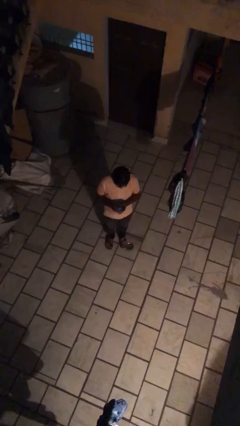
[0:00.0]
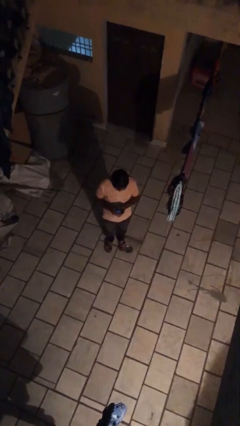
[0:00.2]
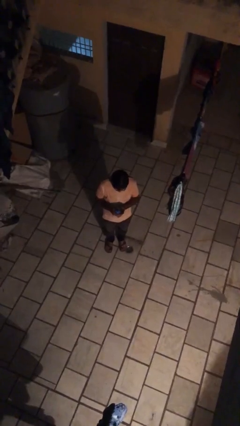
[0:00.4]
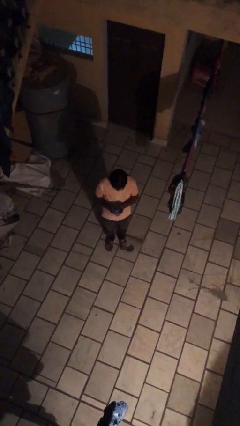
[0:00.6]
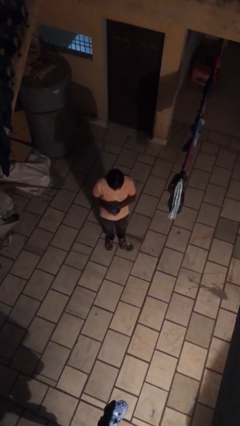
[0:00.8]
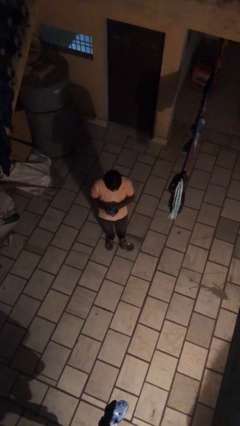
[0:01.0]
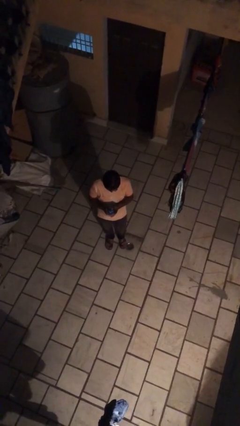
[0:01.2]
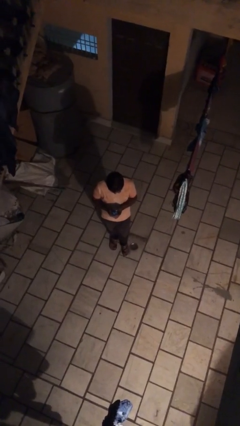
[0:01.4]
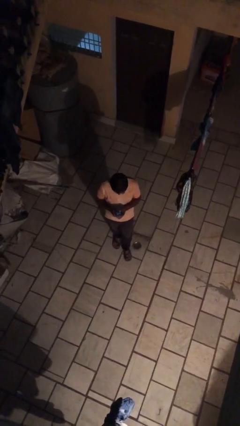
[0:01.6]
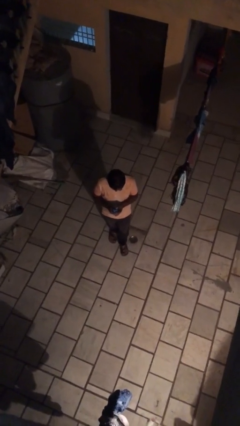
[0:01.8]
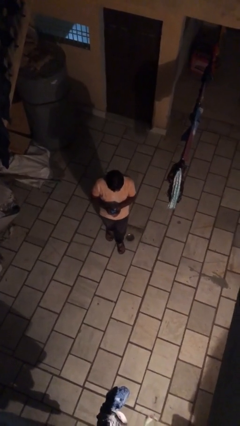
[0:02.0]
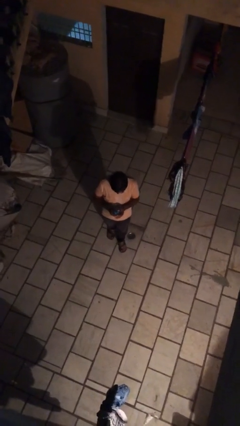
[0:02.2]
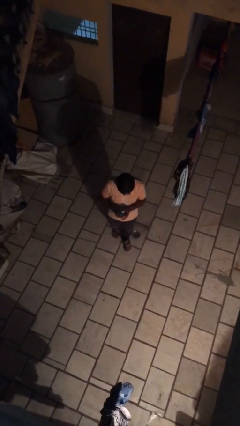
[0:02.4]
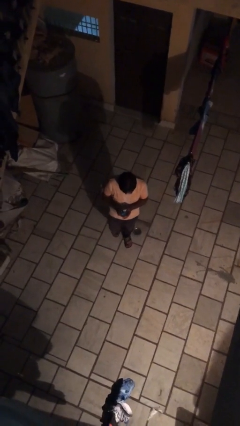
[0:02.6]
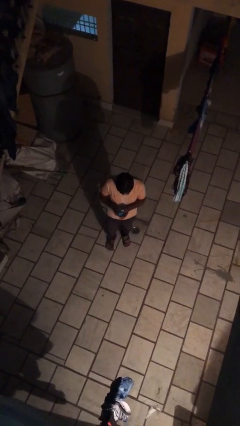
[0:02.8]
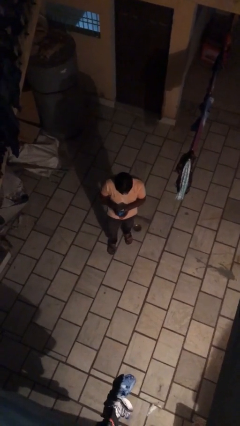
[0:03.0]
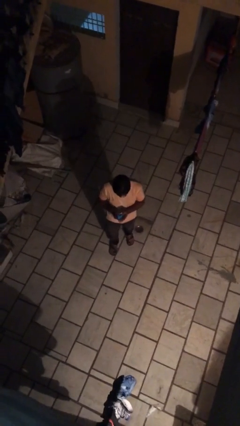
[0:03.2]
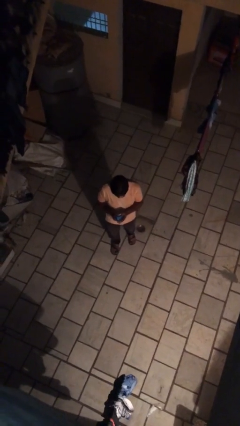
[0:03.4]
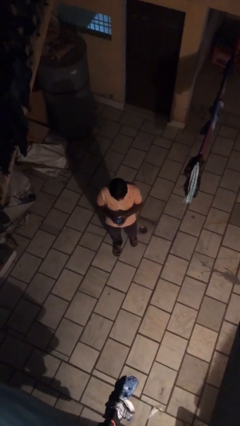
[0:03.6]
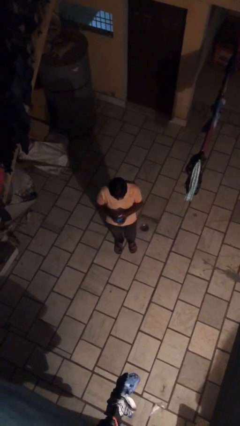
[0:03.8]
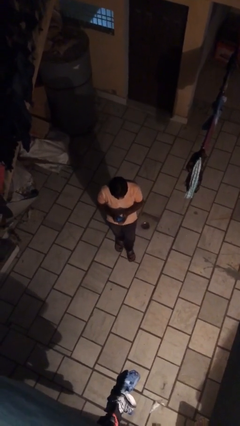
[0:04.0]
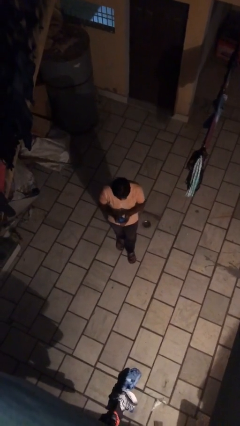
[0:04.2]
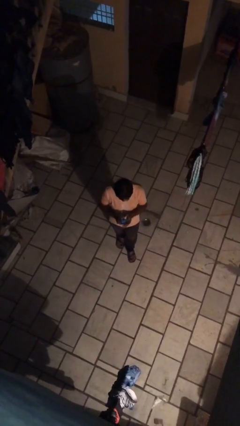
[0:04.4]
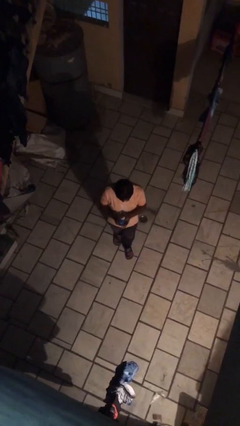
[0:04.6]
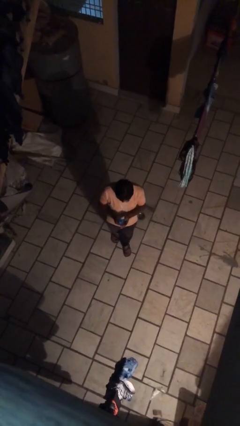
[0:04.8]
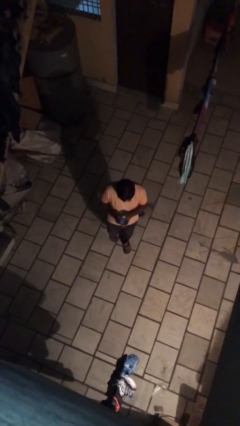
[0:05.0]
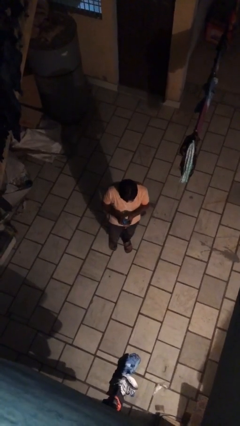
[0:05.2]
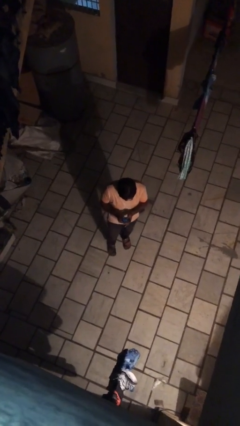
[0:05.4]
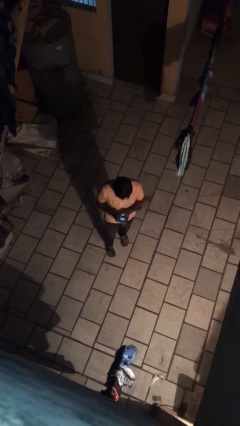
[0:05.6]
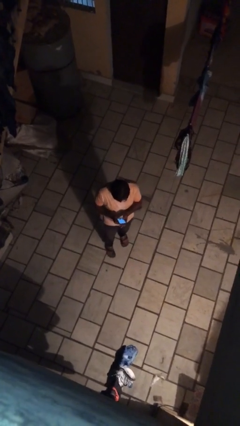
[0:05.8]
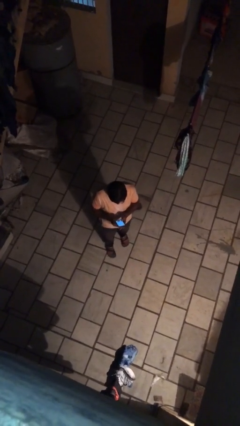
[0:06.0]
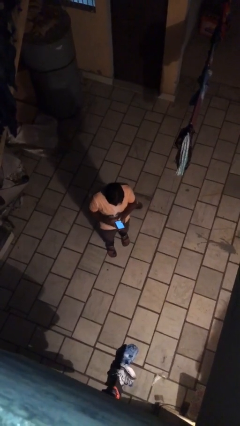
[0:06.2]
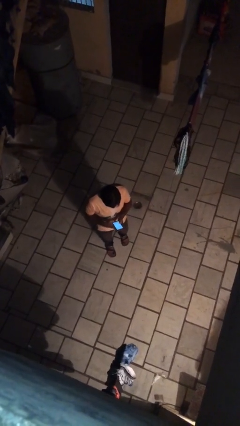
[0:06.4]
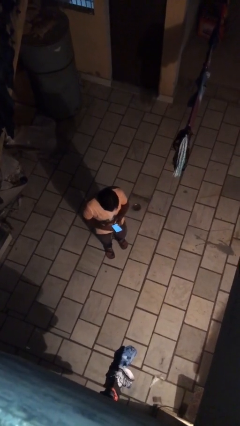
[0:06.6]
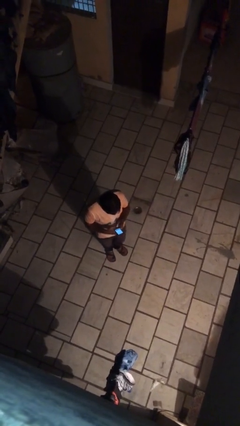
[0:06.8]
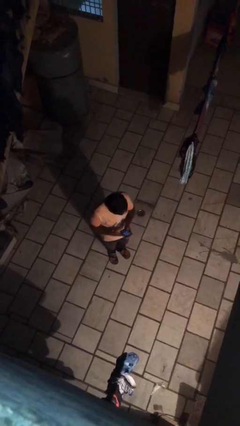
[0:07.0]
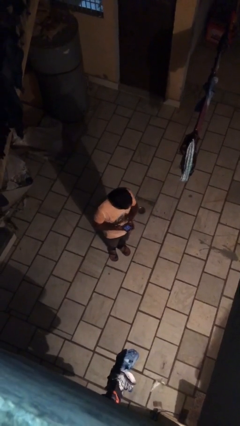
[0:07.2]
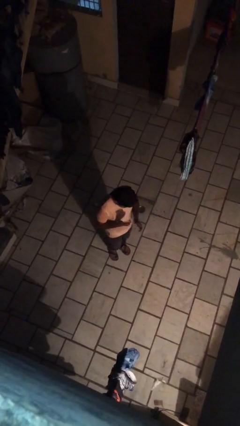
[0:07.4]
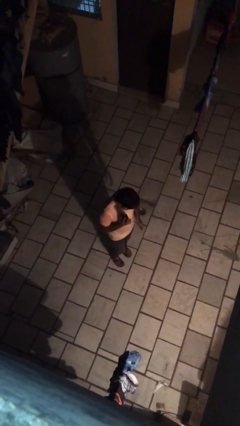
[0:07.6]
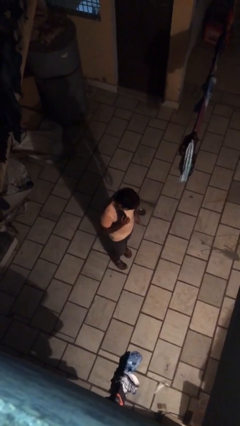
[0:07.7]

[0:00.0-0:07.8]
person texts on phone

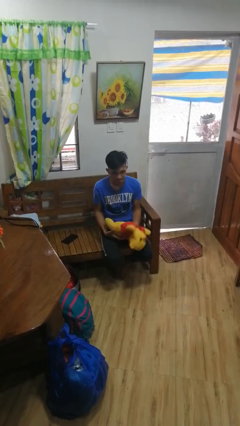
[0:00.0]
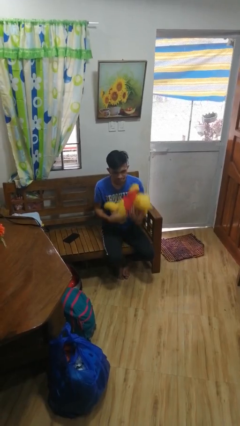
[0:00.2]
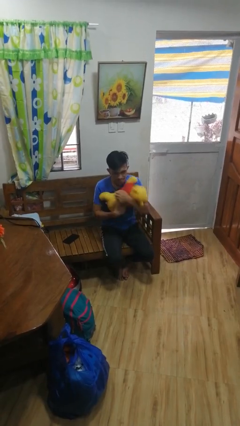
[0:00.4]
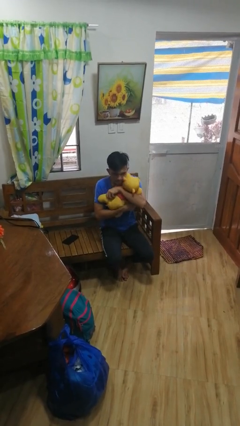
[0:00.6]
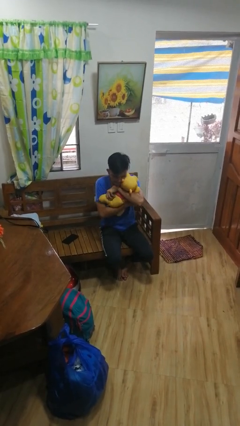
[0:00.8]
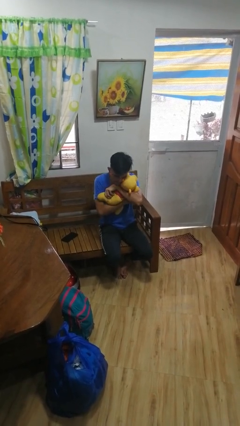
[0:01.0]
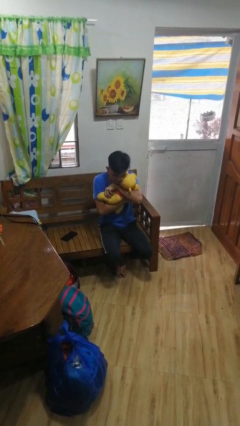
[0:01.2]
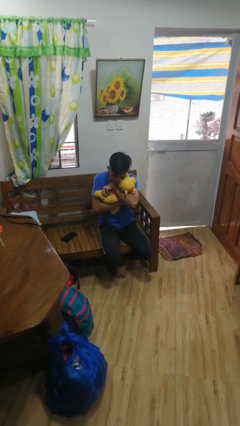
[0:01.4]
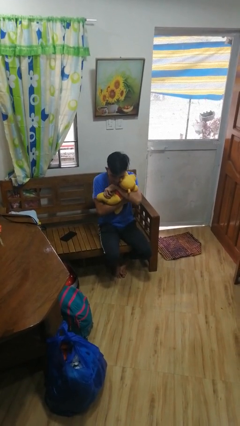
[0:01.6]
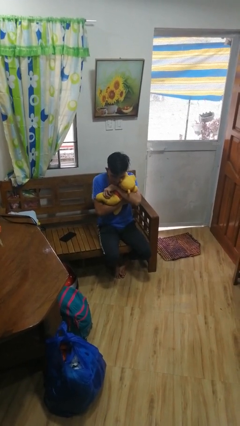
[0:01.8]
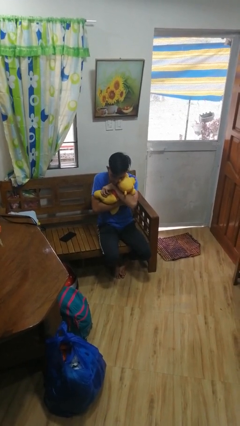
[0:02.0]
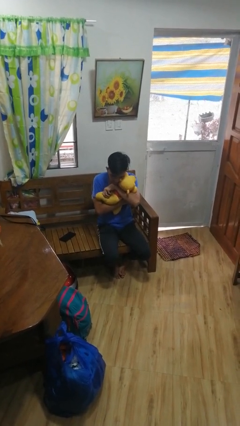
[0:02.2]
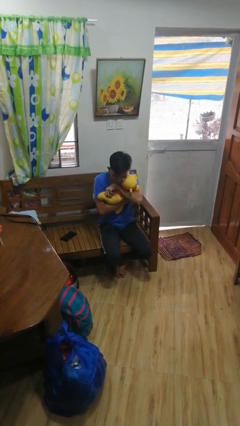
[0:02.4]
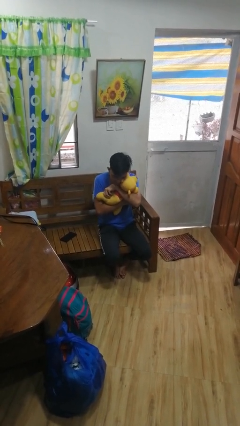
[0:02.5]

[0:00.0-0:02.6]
person hugs stuffed animal

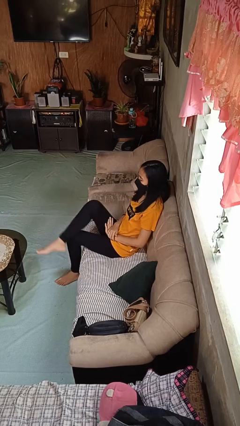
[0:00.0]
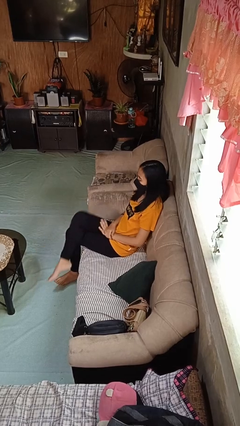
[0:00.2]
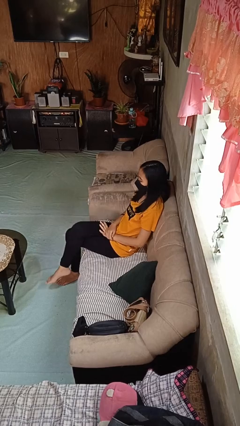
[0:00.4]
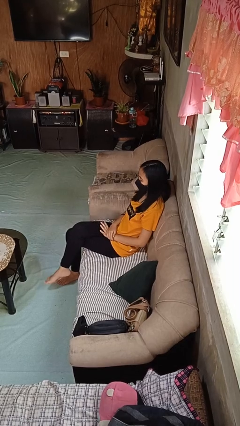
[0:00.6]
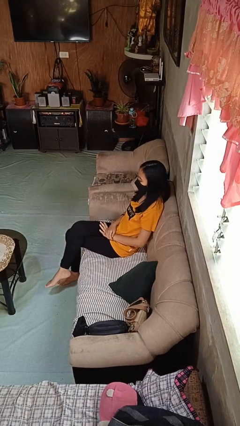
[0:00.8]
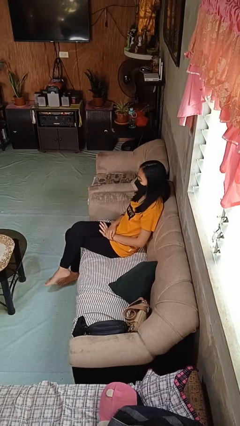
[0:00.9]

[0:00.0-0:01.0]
person crosses legs

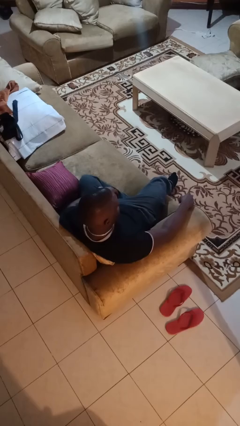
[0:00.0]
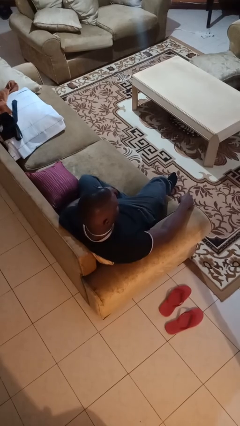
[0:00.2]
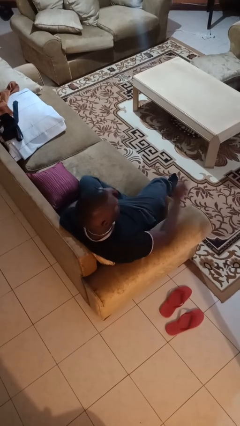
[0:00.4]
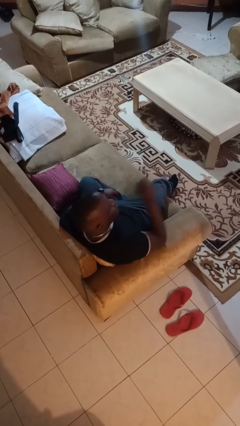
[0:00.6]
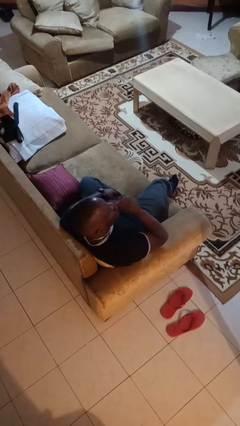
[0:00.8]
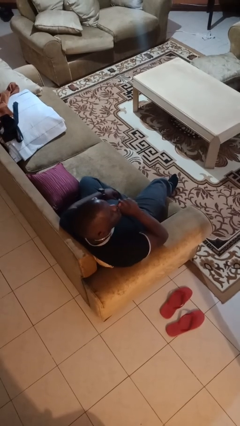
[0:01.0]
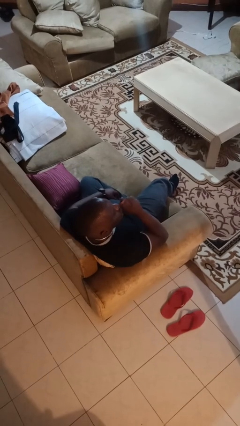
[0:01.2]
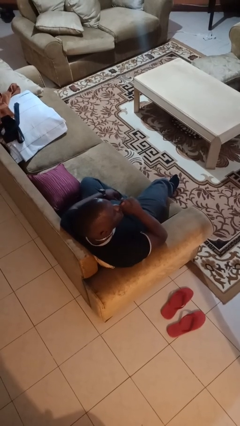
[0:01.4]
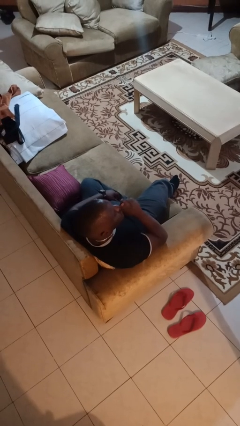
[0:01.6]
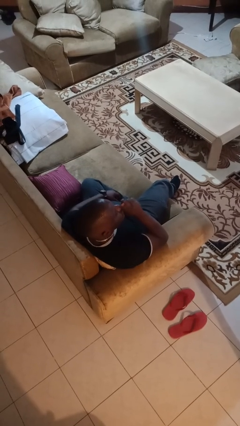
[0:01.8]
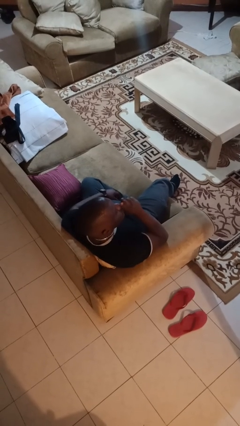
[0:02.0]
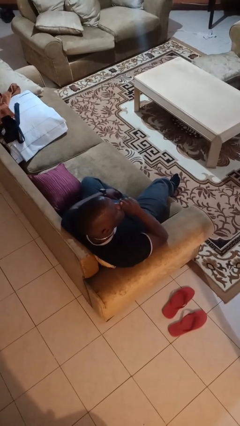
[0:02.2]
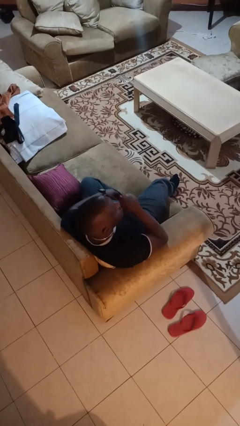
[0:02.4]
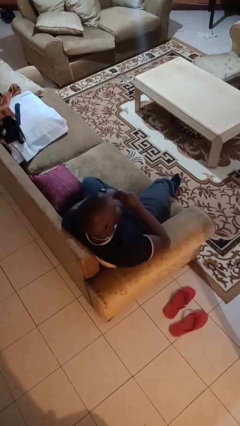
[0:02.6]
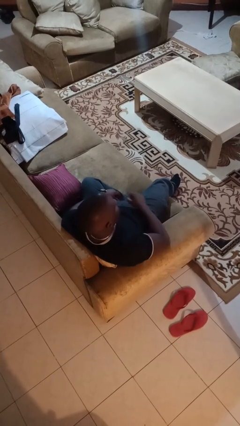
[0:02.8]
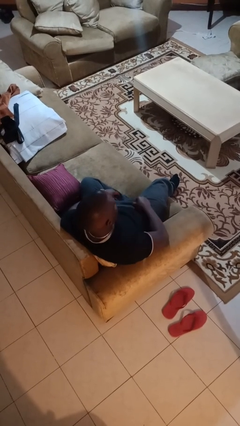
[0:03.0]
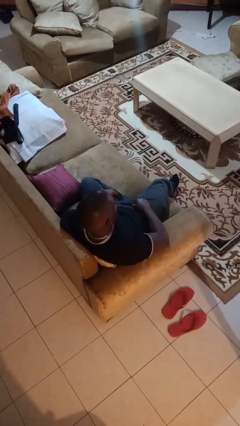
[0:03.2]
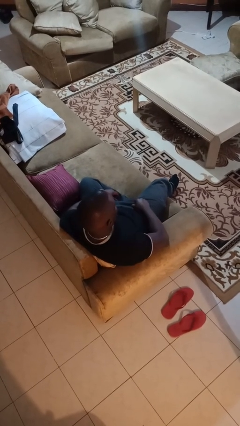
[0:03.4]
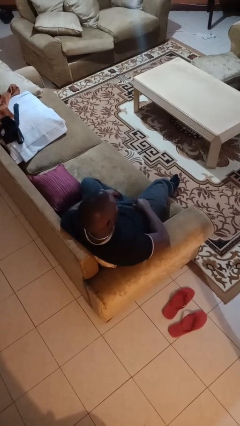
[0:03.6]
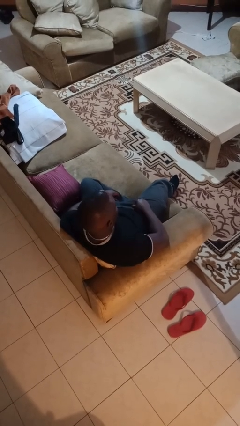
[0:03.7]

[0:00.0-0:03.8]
person gestures be quiet

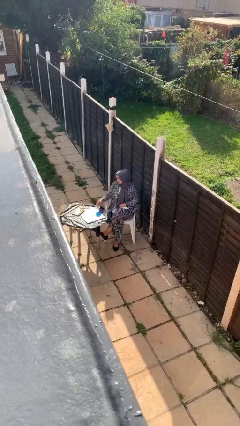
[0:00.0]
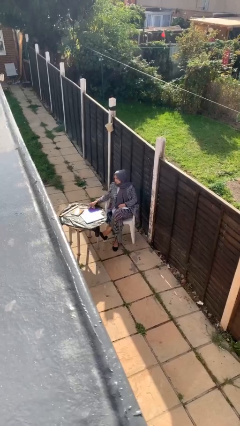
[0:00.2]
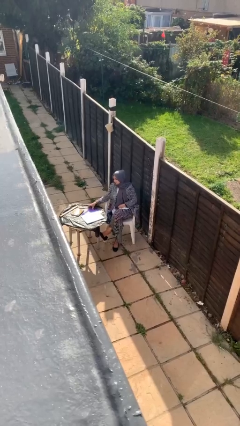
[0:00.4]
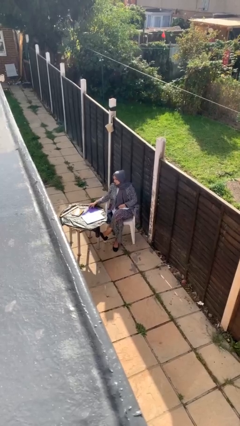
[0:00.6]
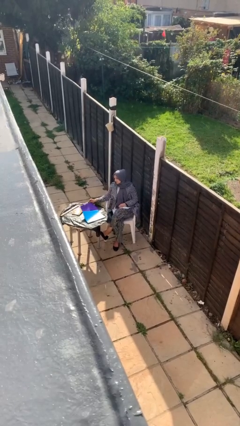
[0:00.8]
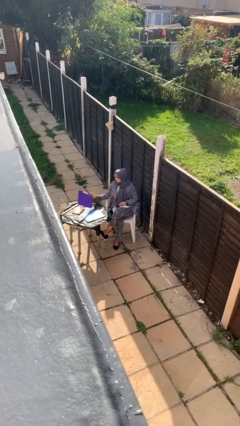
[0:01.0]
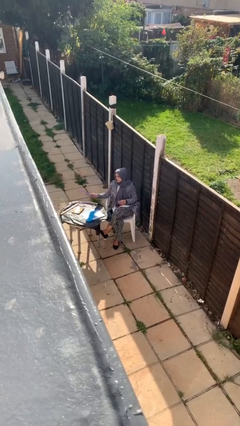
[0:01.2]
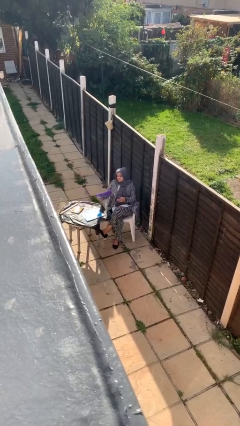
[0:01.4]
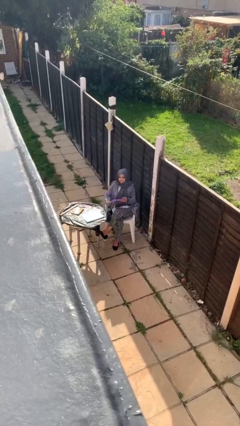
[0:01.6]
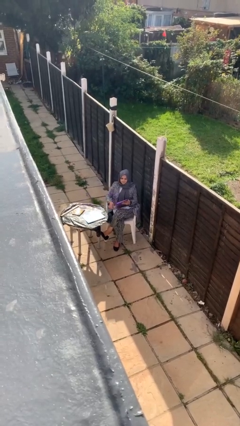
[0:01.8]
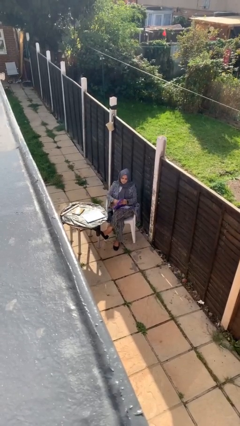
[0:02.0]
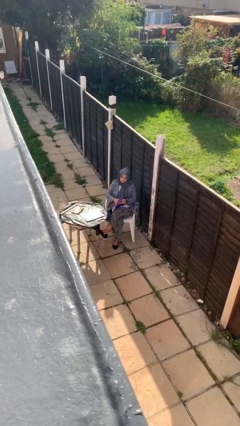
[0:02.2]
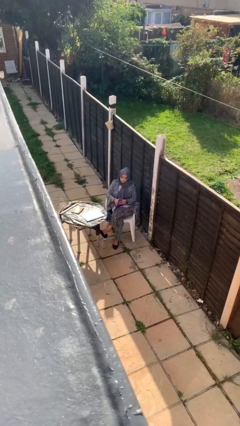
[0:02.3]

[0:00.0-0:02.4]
person picks up object from table
